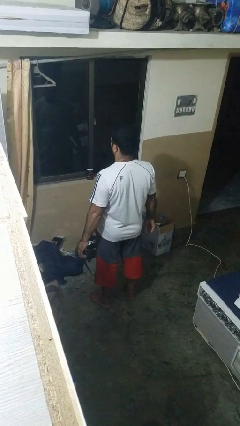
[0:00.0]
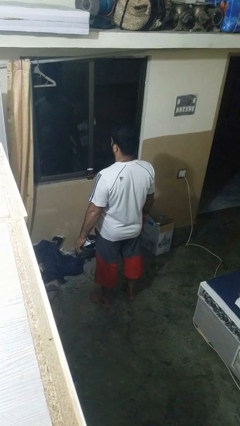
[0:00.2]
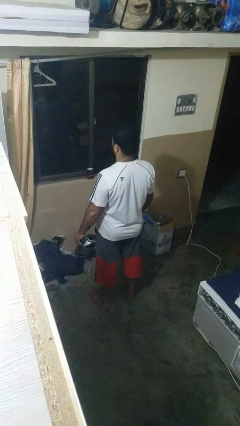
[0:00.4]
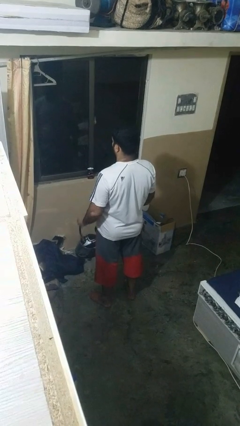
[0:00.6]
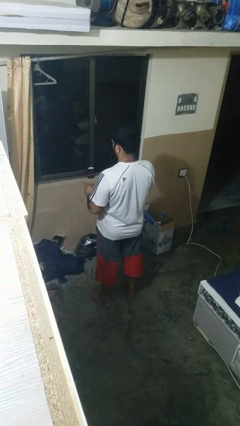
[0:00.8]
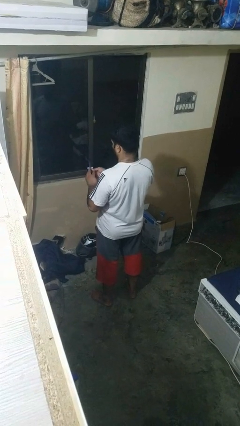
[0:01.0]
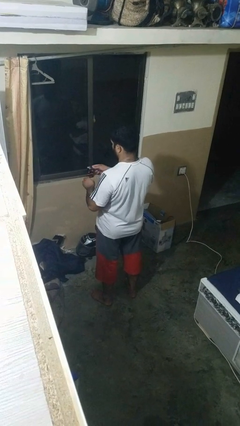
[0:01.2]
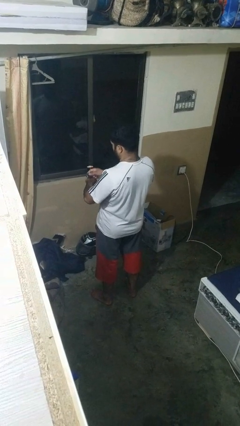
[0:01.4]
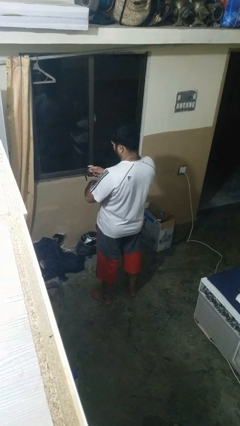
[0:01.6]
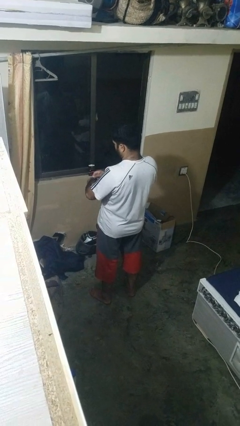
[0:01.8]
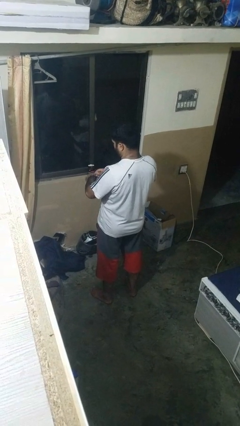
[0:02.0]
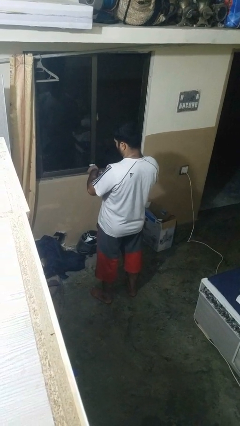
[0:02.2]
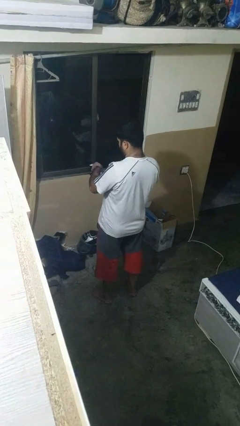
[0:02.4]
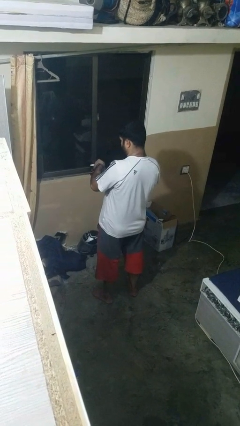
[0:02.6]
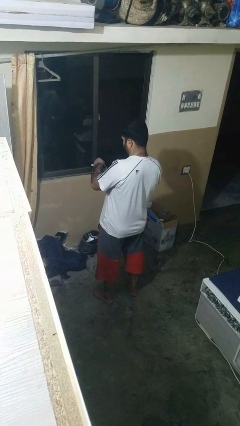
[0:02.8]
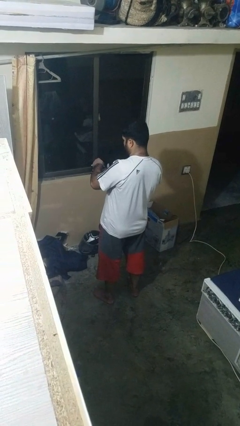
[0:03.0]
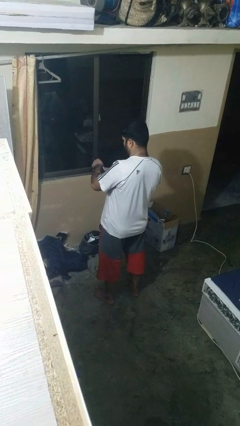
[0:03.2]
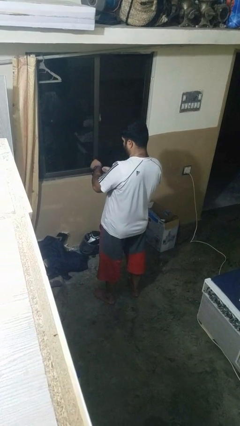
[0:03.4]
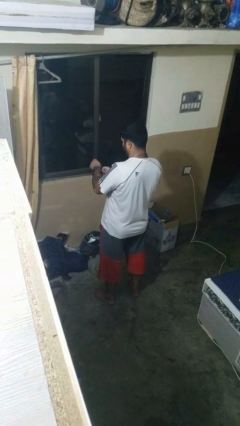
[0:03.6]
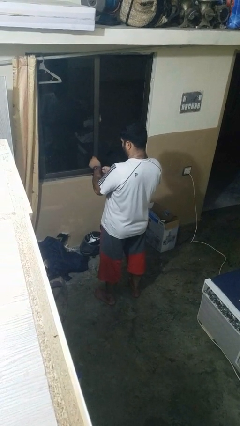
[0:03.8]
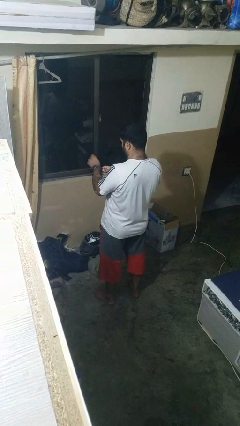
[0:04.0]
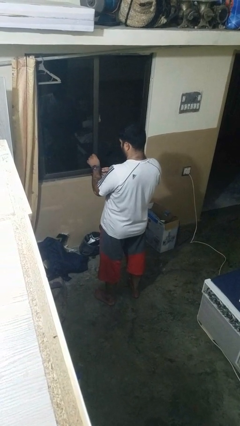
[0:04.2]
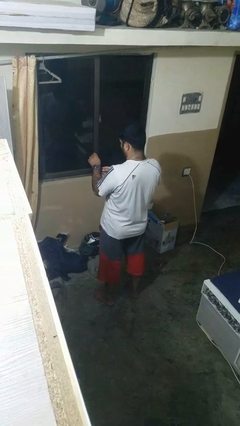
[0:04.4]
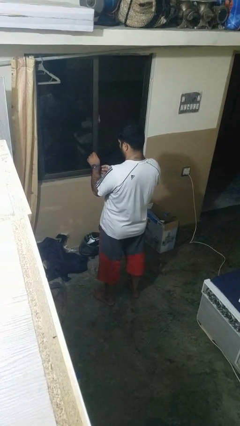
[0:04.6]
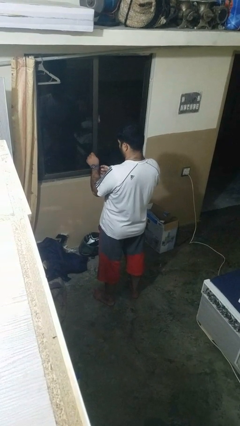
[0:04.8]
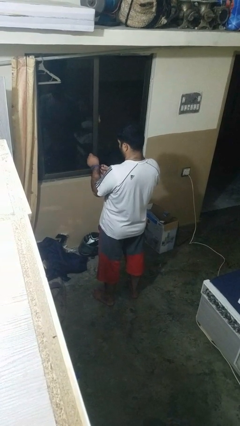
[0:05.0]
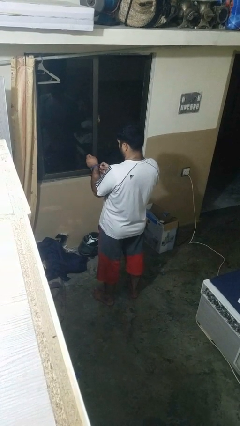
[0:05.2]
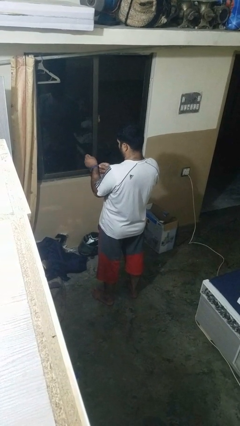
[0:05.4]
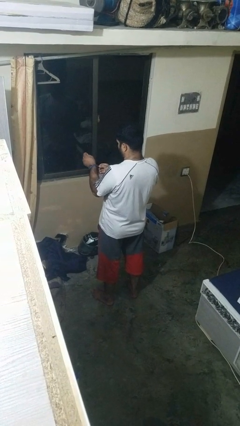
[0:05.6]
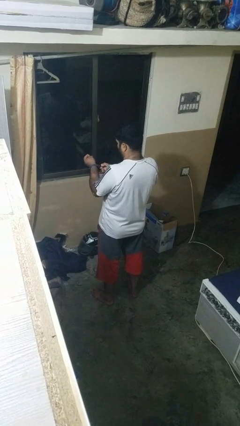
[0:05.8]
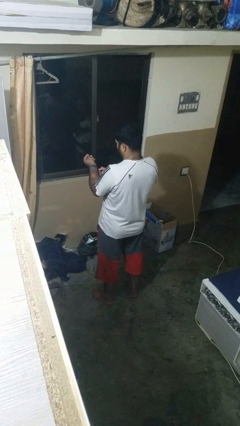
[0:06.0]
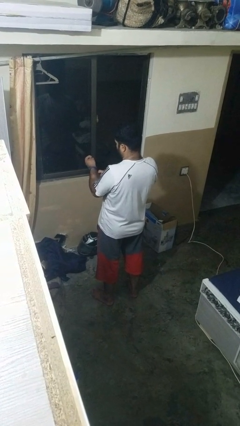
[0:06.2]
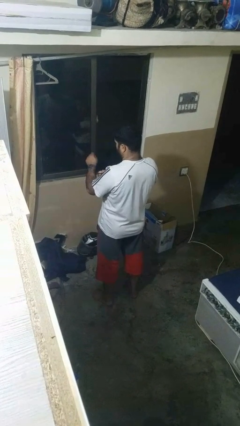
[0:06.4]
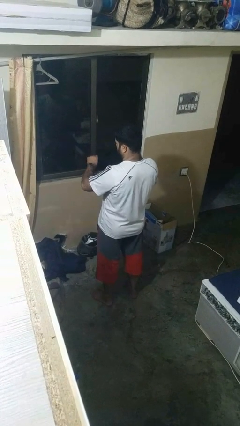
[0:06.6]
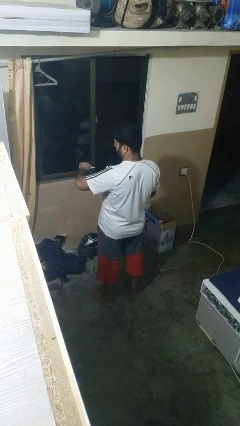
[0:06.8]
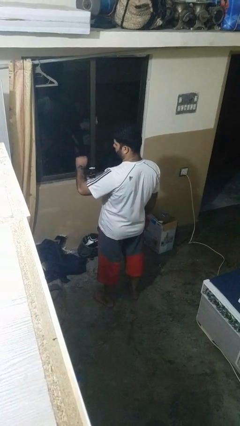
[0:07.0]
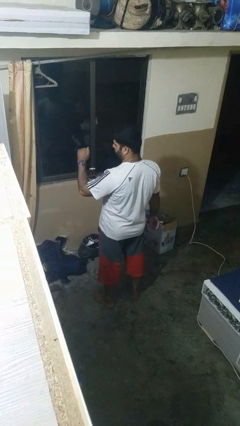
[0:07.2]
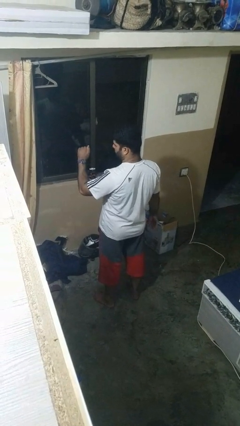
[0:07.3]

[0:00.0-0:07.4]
person puts on wristwatch

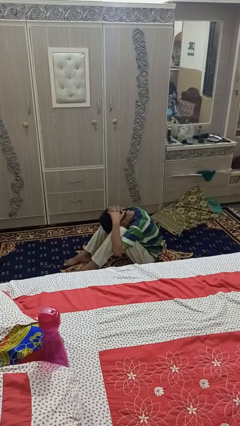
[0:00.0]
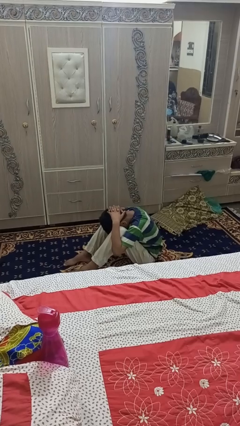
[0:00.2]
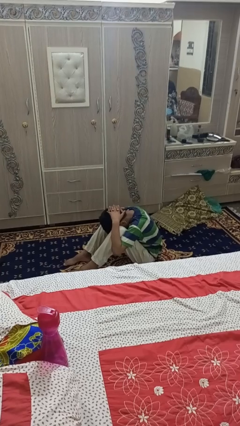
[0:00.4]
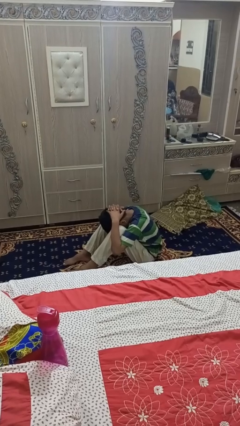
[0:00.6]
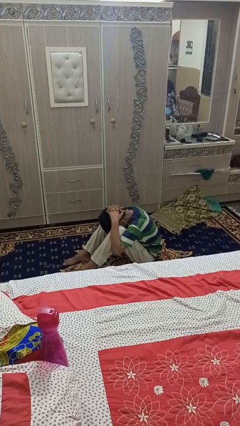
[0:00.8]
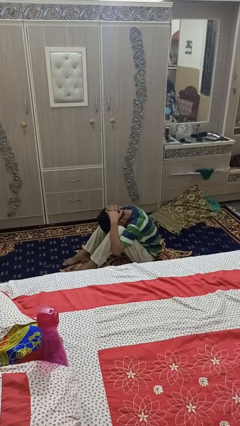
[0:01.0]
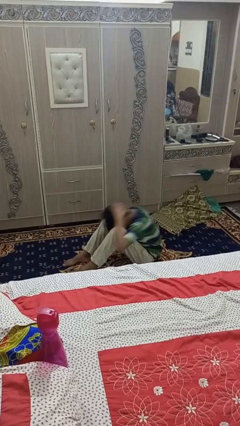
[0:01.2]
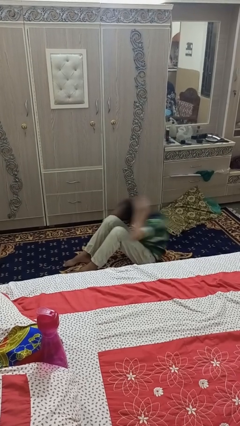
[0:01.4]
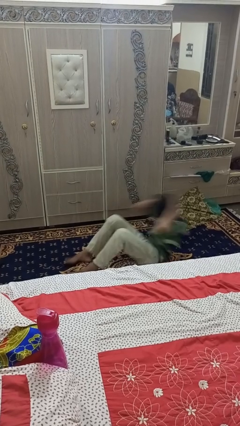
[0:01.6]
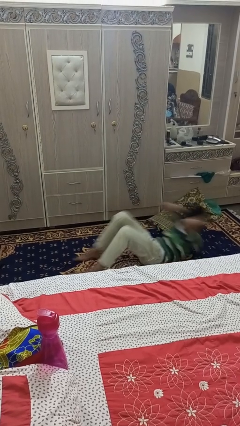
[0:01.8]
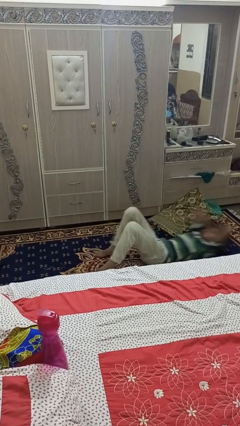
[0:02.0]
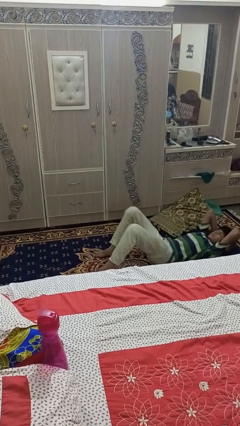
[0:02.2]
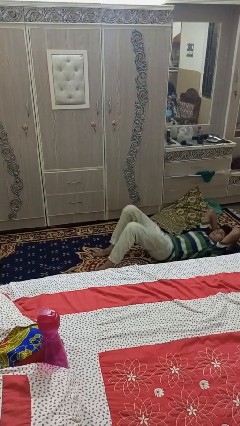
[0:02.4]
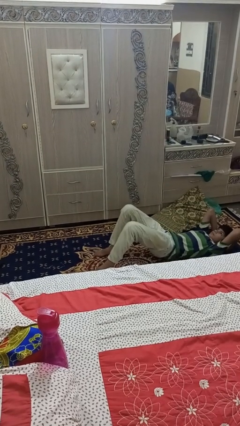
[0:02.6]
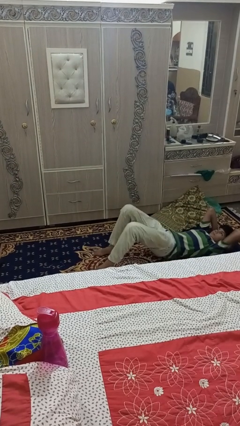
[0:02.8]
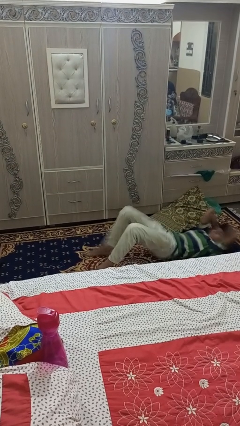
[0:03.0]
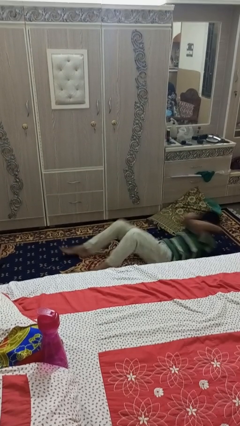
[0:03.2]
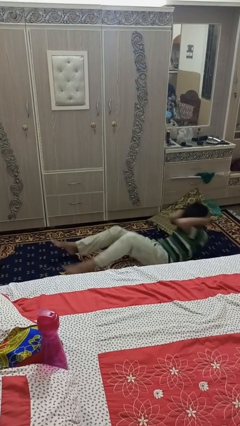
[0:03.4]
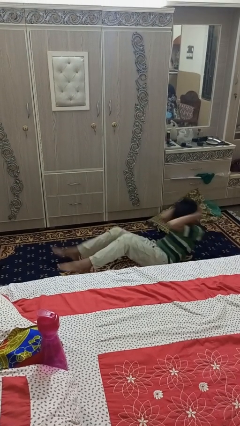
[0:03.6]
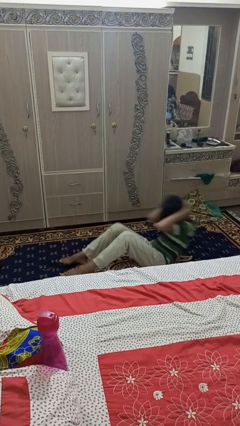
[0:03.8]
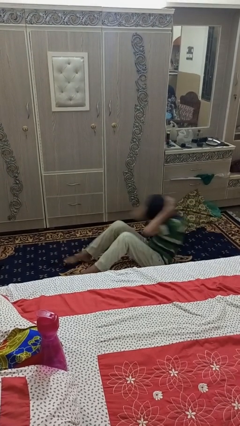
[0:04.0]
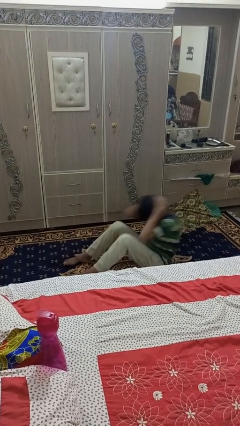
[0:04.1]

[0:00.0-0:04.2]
person exercises with situp

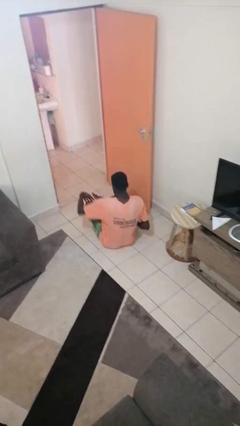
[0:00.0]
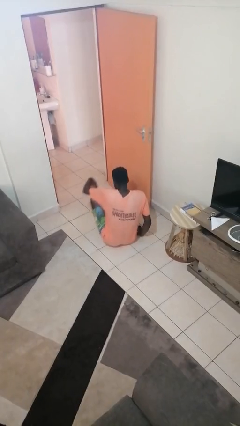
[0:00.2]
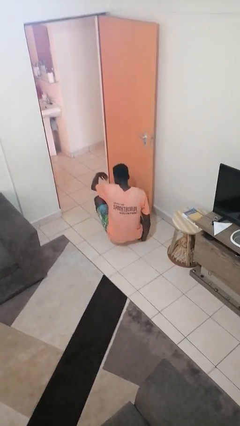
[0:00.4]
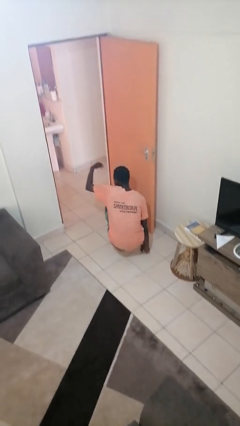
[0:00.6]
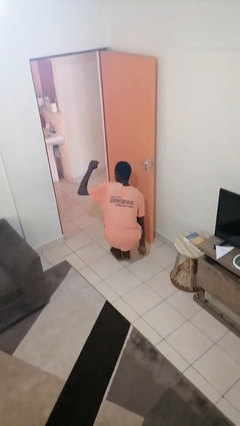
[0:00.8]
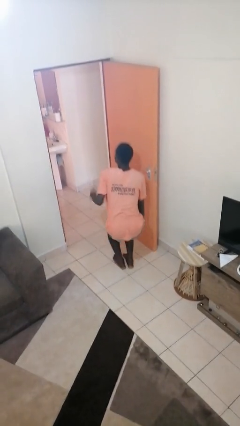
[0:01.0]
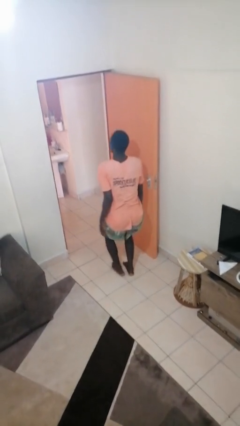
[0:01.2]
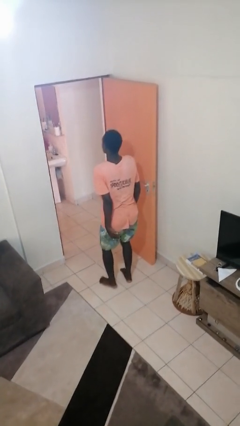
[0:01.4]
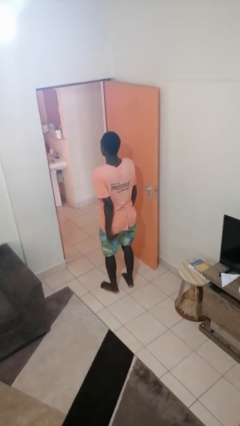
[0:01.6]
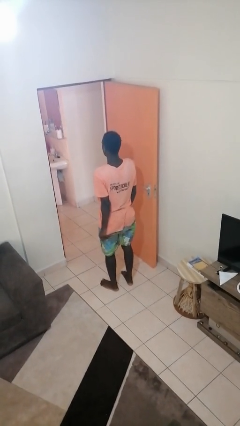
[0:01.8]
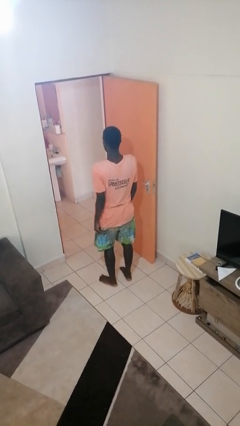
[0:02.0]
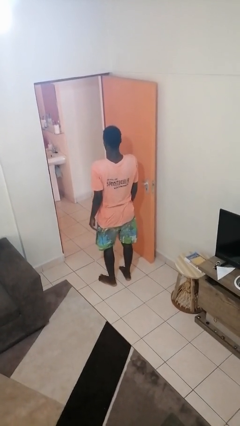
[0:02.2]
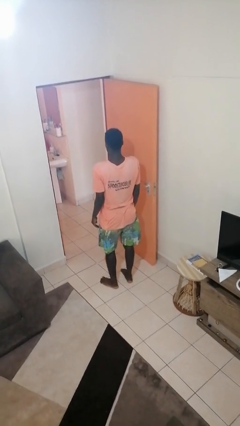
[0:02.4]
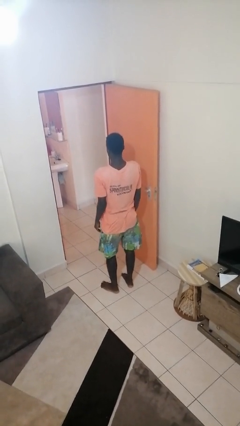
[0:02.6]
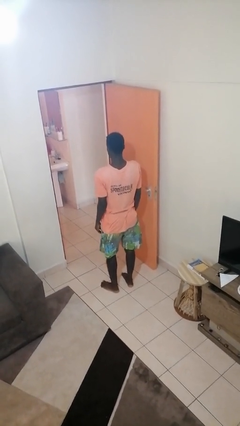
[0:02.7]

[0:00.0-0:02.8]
person stands up from floor

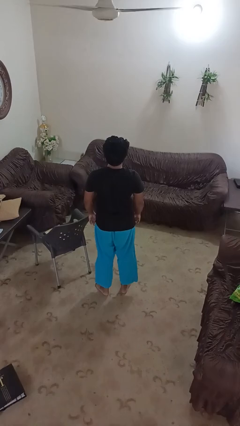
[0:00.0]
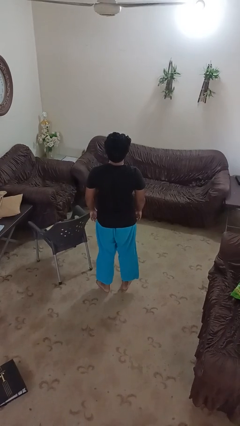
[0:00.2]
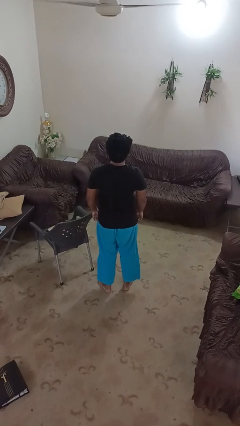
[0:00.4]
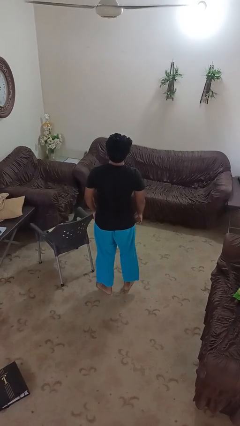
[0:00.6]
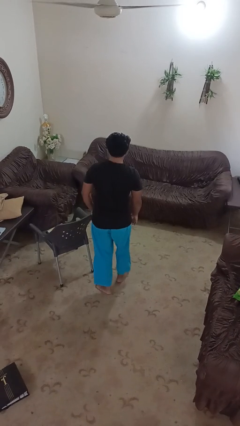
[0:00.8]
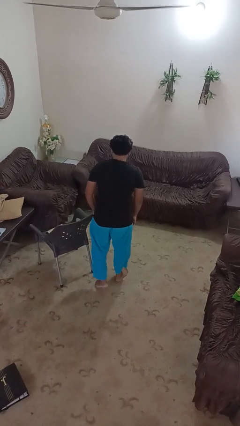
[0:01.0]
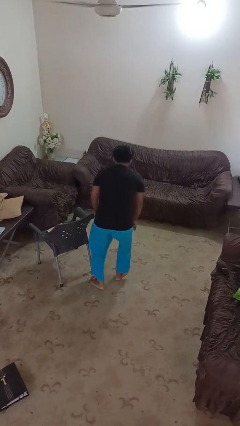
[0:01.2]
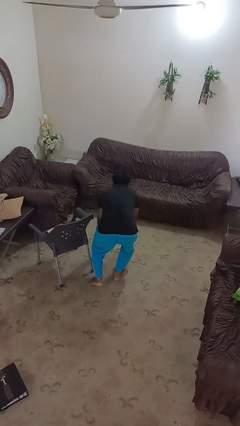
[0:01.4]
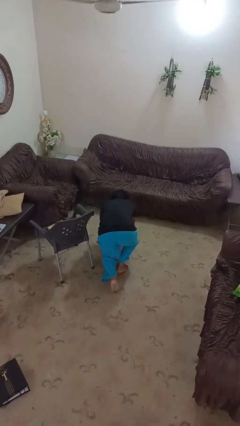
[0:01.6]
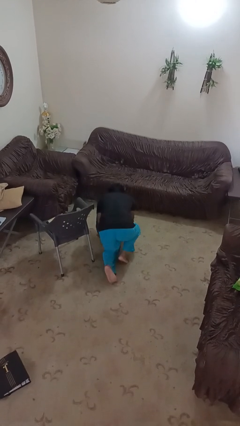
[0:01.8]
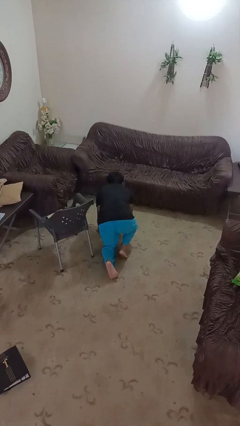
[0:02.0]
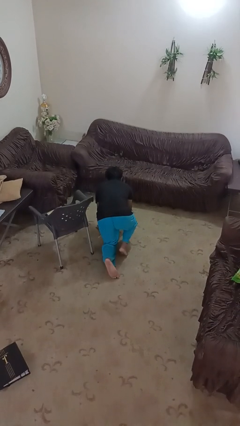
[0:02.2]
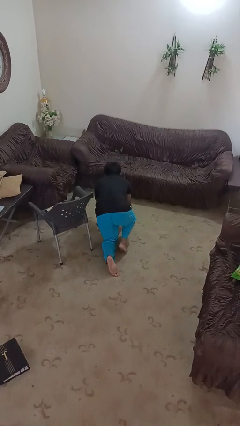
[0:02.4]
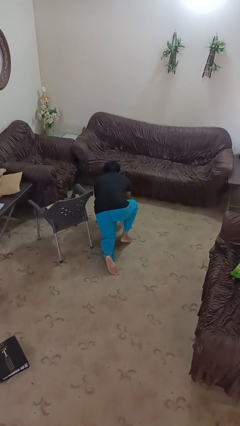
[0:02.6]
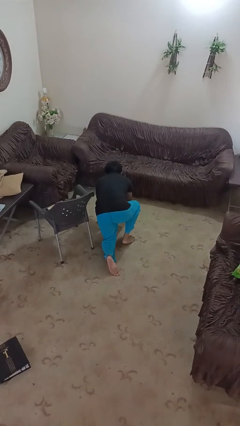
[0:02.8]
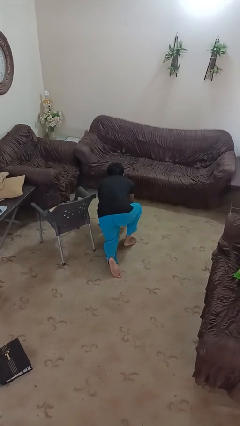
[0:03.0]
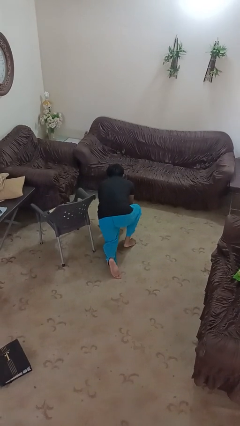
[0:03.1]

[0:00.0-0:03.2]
person trips on object on floor
